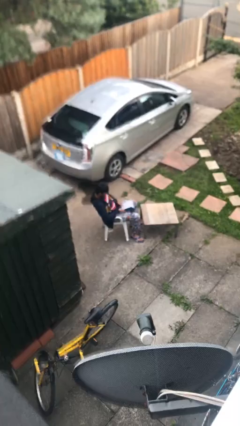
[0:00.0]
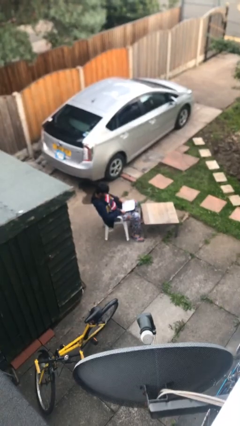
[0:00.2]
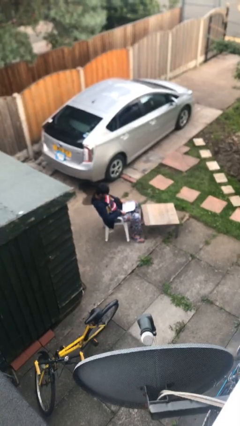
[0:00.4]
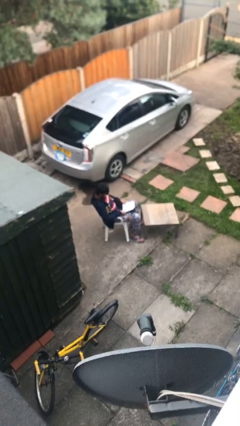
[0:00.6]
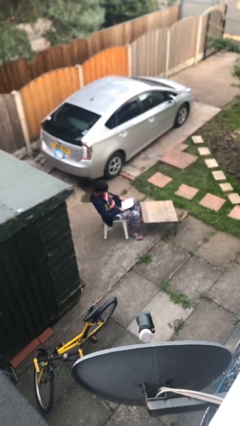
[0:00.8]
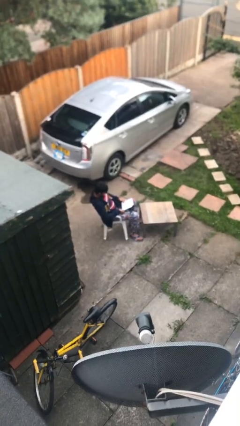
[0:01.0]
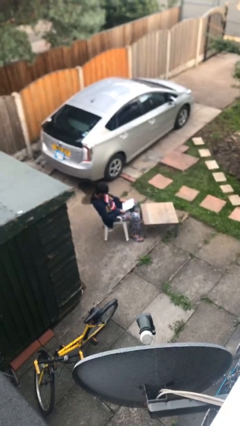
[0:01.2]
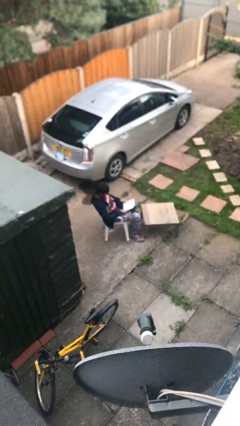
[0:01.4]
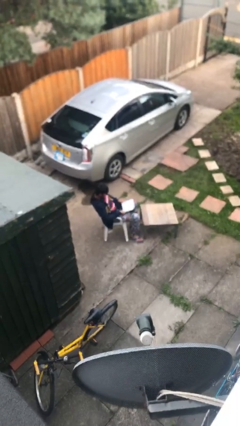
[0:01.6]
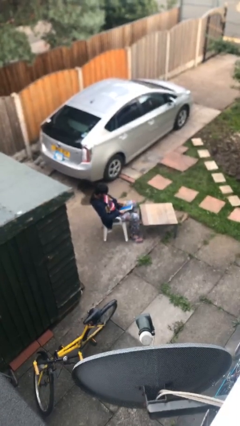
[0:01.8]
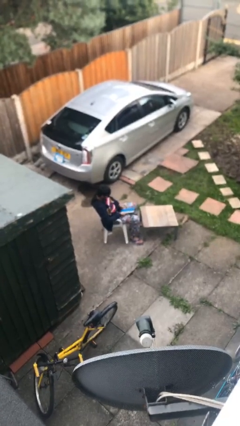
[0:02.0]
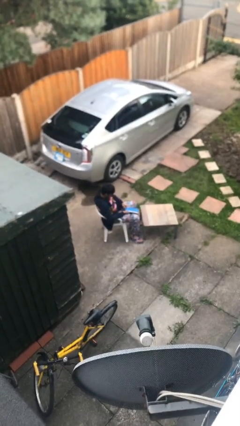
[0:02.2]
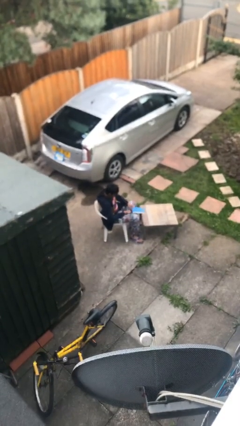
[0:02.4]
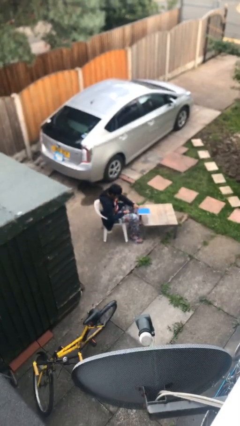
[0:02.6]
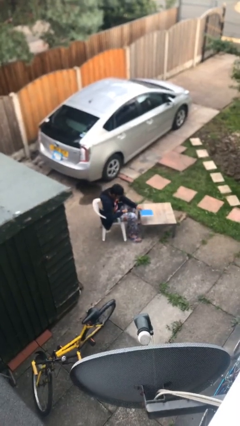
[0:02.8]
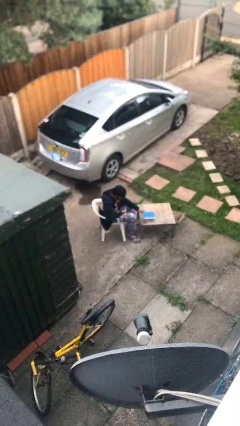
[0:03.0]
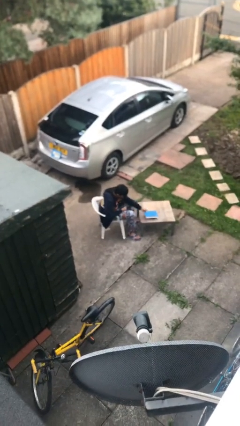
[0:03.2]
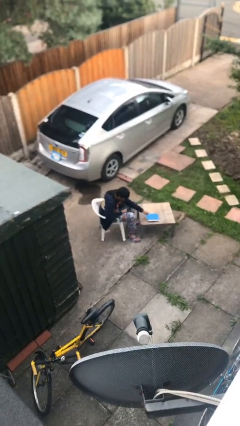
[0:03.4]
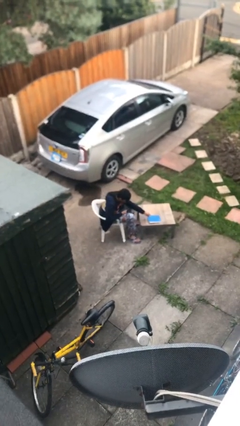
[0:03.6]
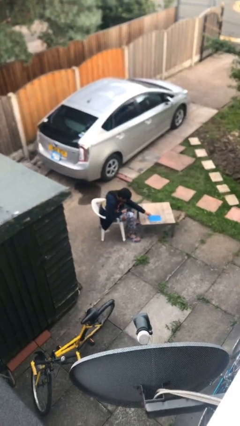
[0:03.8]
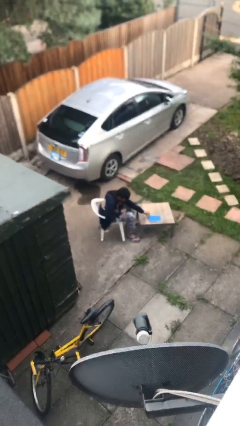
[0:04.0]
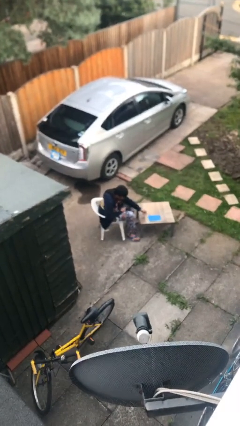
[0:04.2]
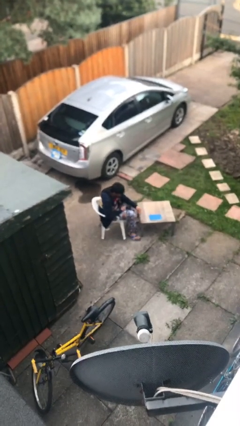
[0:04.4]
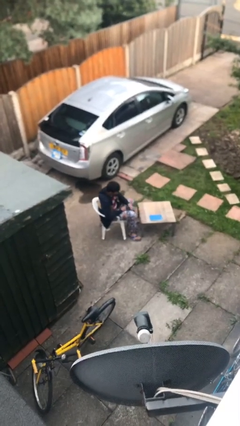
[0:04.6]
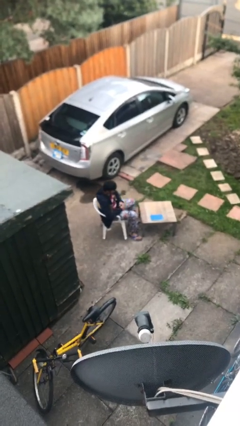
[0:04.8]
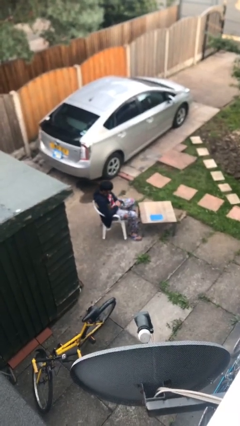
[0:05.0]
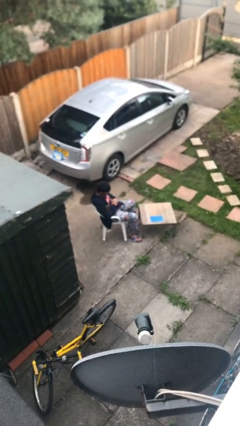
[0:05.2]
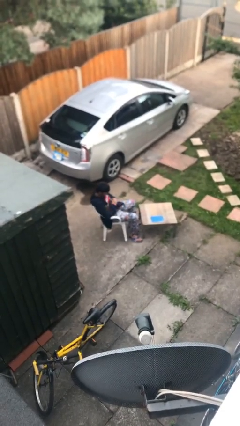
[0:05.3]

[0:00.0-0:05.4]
person puts down object on table

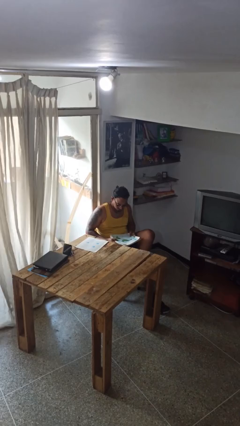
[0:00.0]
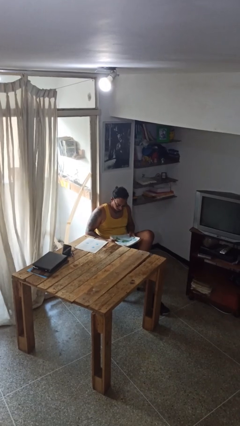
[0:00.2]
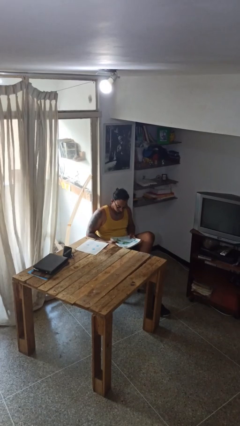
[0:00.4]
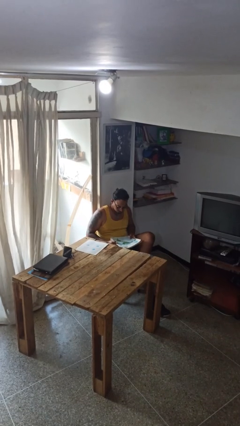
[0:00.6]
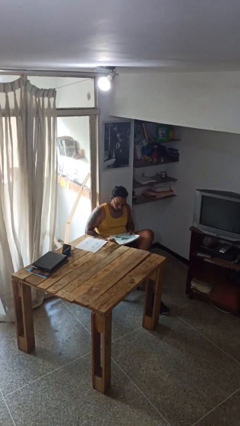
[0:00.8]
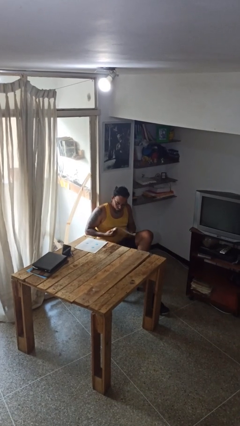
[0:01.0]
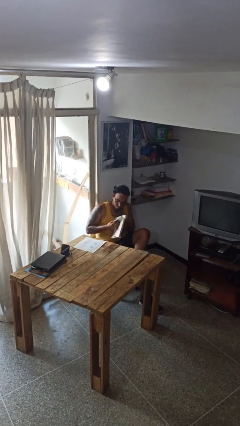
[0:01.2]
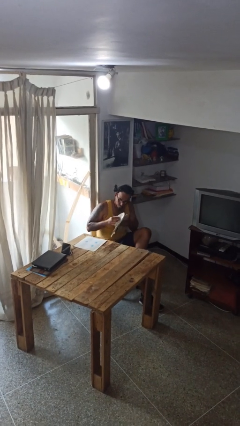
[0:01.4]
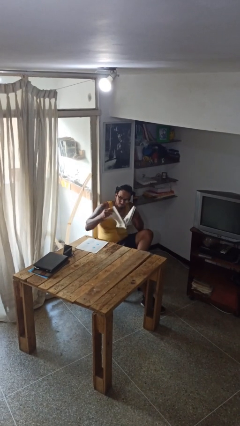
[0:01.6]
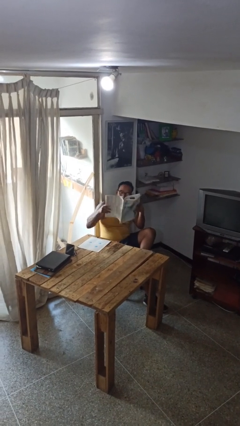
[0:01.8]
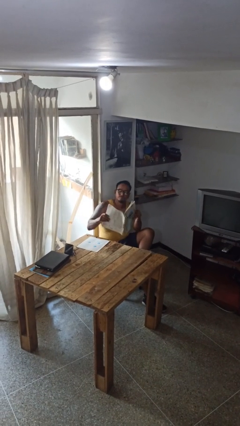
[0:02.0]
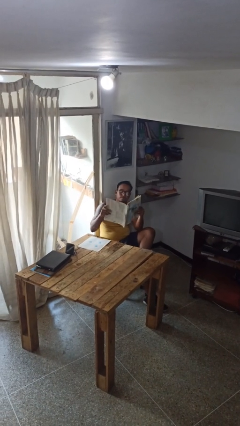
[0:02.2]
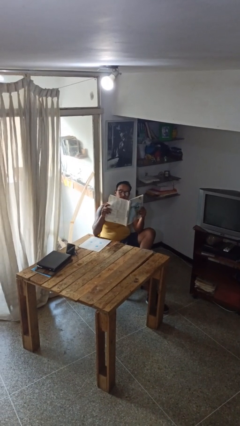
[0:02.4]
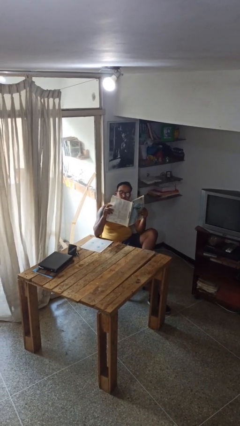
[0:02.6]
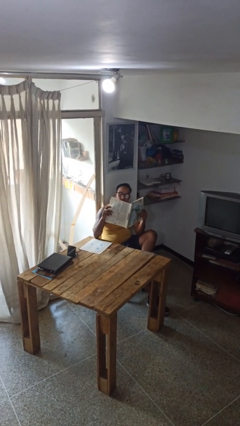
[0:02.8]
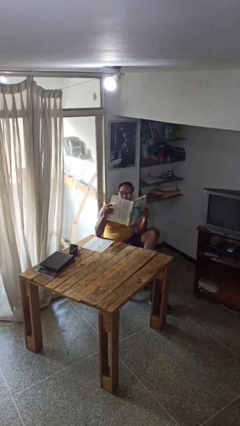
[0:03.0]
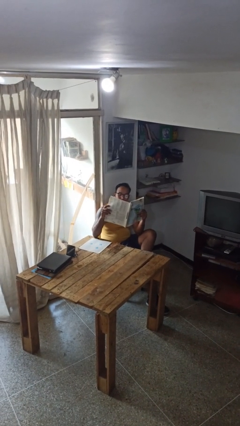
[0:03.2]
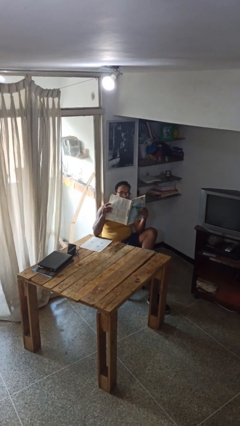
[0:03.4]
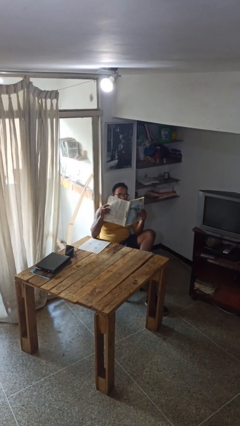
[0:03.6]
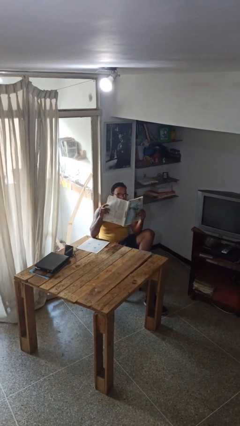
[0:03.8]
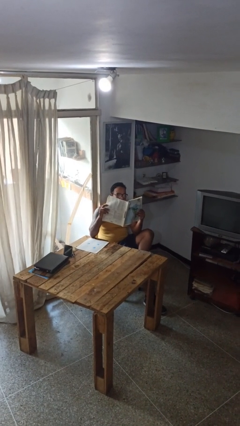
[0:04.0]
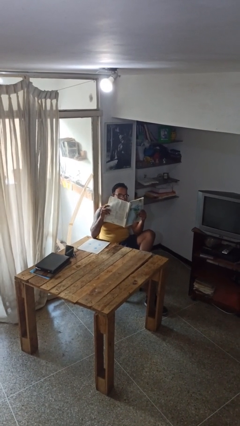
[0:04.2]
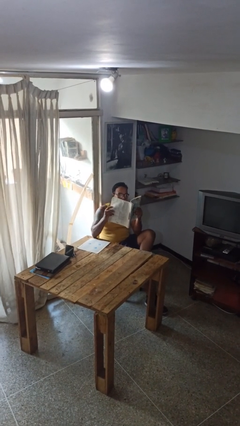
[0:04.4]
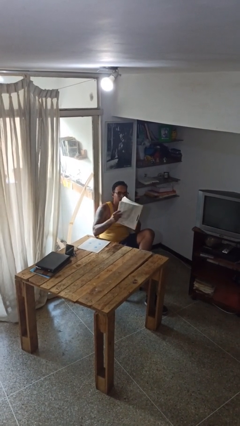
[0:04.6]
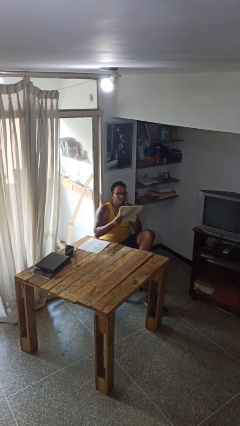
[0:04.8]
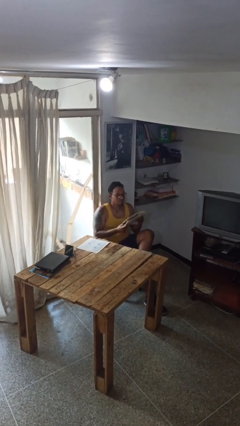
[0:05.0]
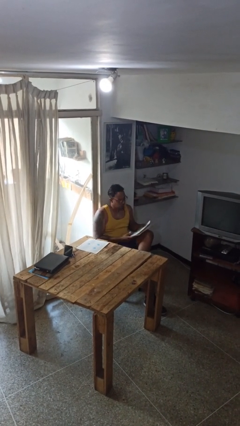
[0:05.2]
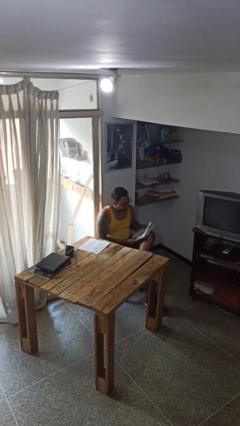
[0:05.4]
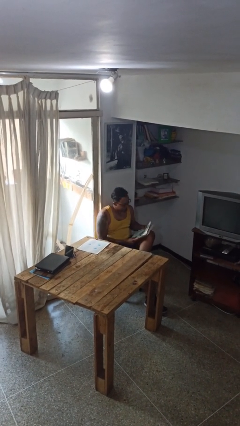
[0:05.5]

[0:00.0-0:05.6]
person reads document

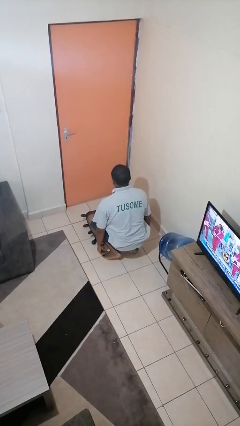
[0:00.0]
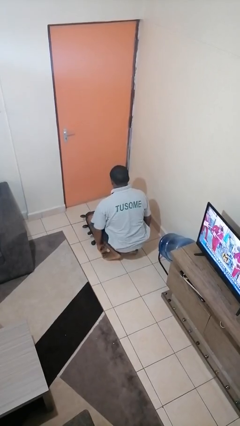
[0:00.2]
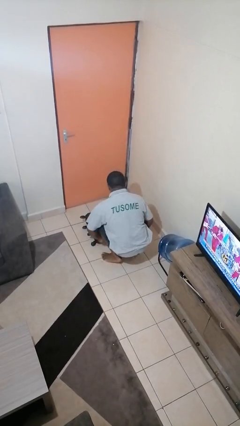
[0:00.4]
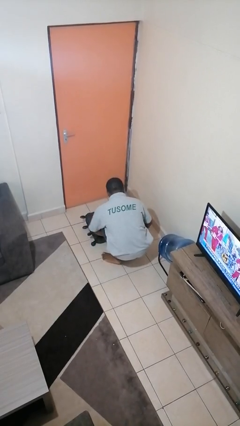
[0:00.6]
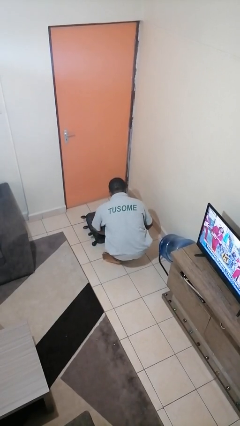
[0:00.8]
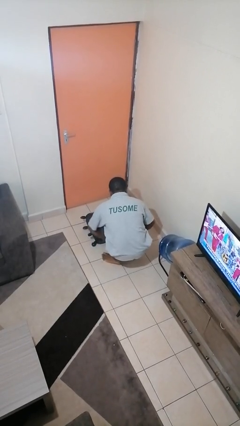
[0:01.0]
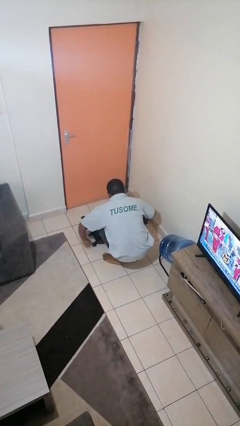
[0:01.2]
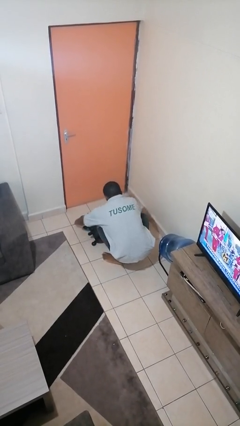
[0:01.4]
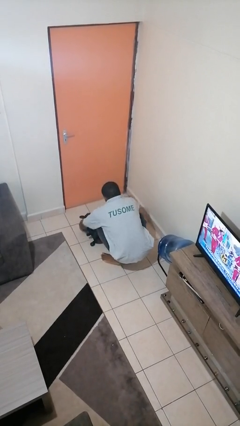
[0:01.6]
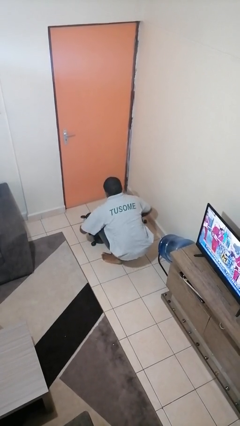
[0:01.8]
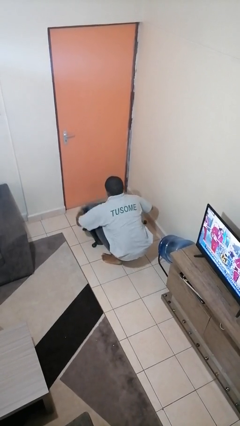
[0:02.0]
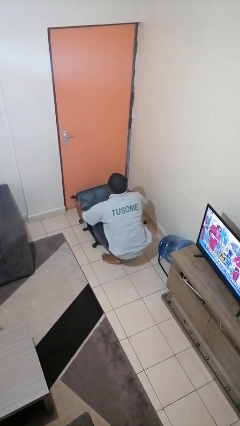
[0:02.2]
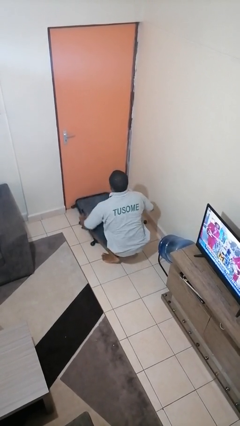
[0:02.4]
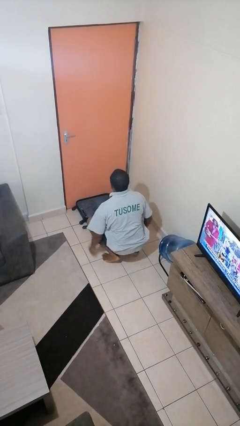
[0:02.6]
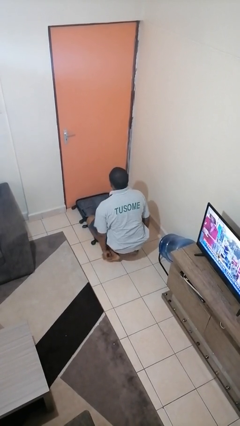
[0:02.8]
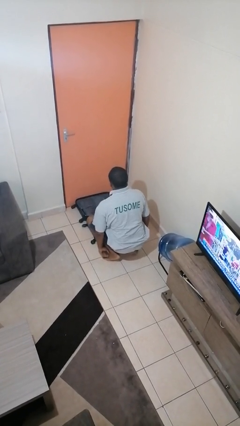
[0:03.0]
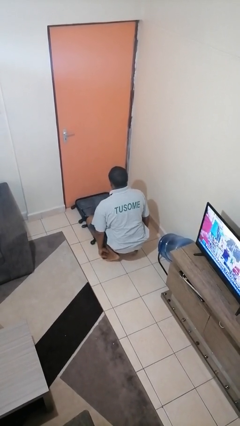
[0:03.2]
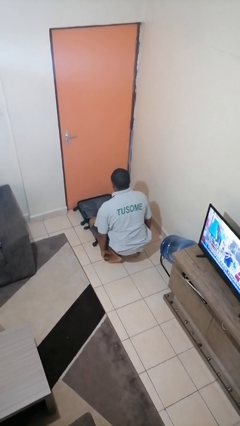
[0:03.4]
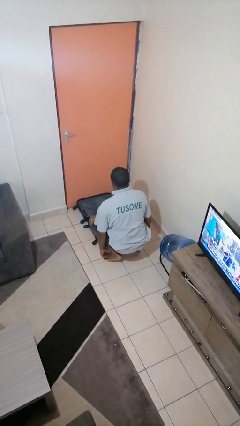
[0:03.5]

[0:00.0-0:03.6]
person opens suitcase

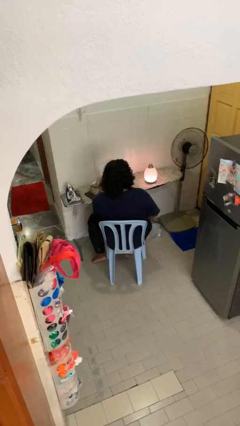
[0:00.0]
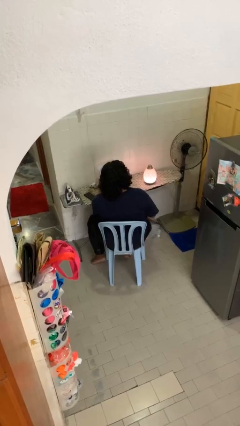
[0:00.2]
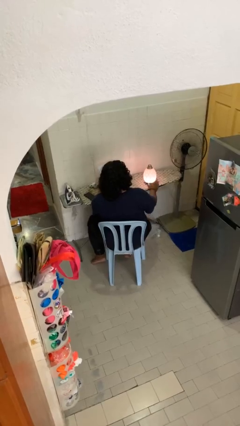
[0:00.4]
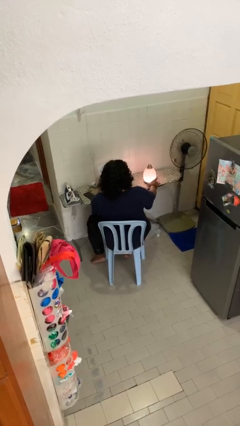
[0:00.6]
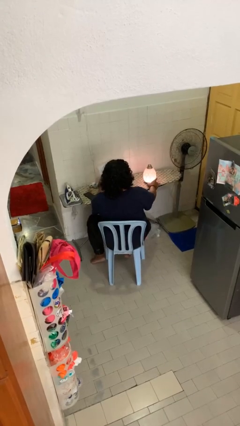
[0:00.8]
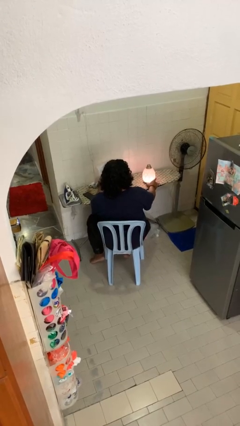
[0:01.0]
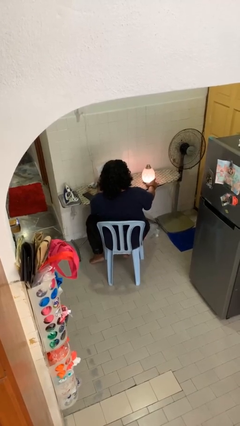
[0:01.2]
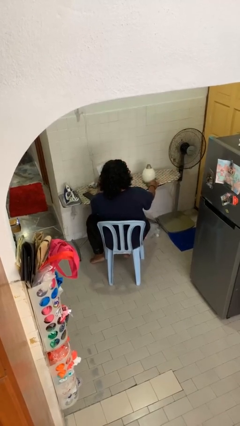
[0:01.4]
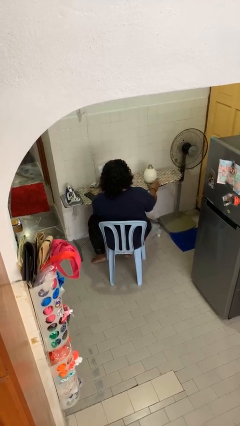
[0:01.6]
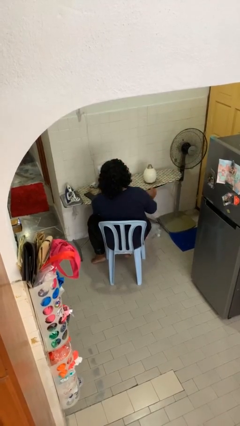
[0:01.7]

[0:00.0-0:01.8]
person turns off lamp

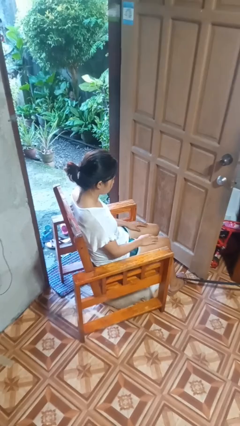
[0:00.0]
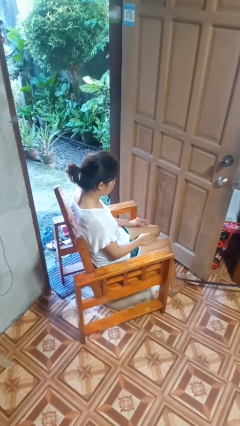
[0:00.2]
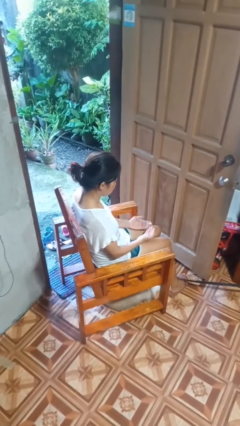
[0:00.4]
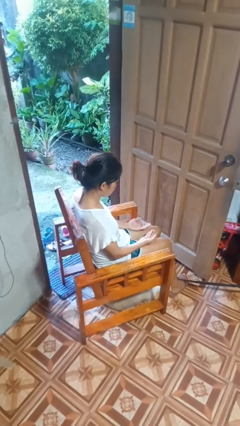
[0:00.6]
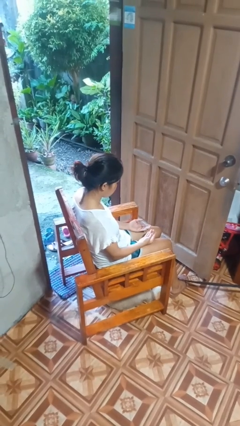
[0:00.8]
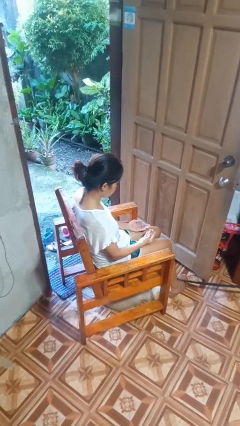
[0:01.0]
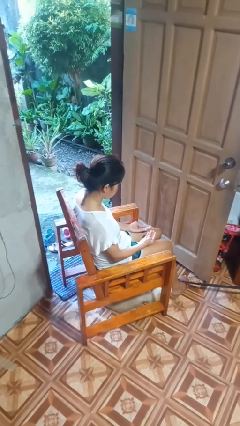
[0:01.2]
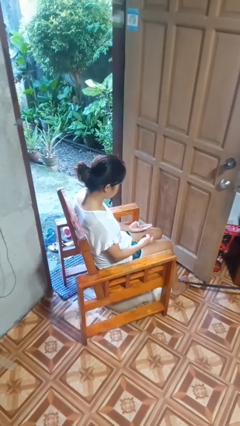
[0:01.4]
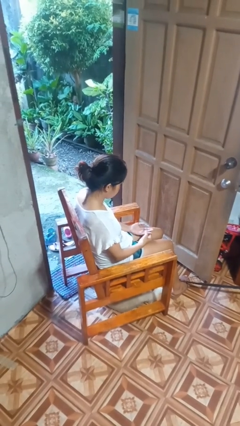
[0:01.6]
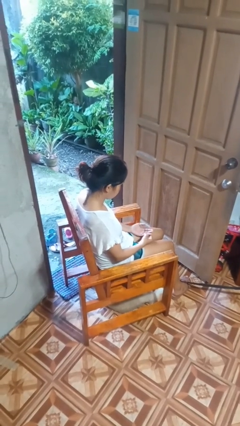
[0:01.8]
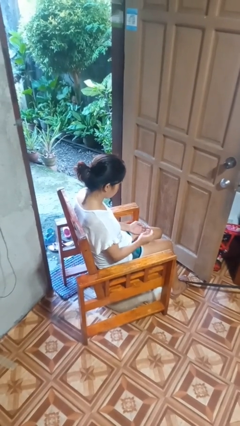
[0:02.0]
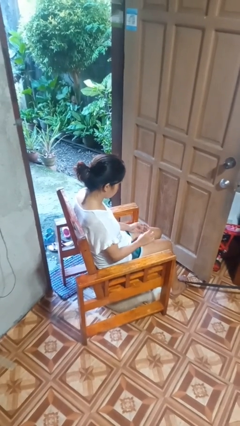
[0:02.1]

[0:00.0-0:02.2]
person looks at hands in lap
